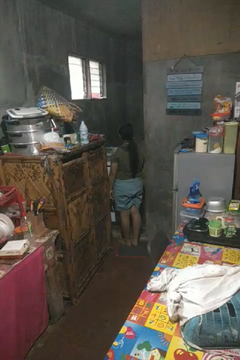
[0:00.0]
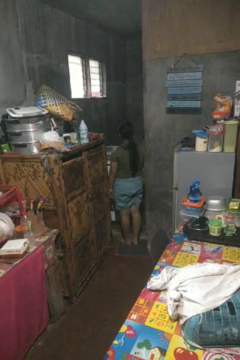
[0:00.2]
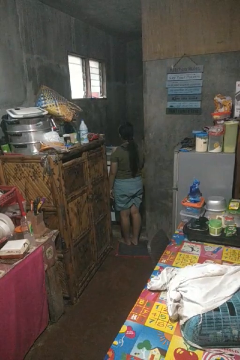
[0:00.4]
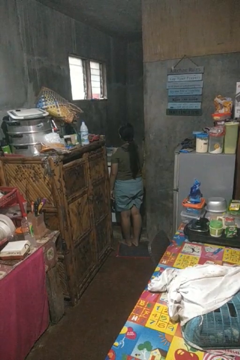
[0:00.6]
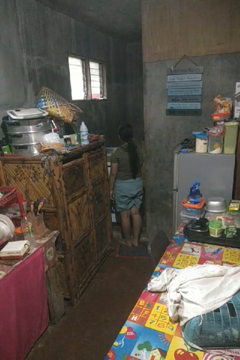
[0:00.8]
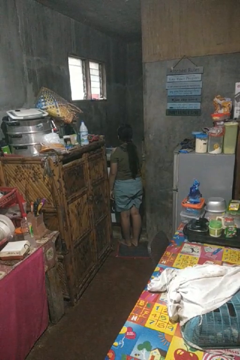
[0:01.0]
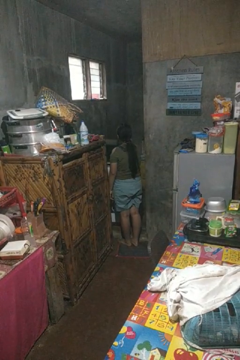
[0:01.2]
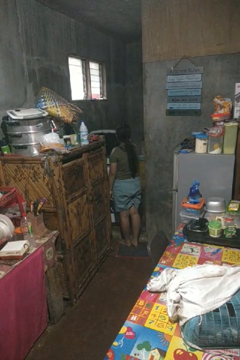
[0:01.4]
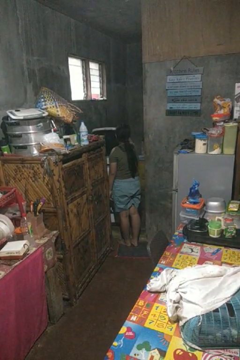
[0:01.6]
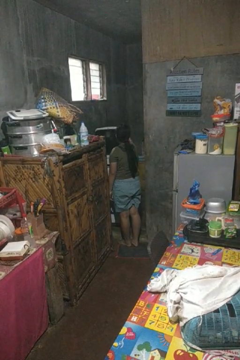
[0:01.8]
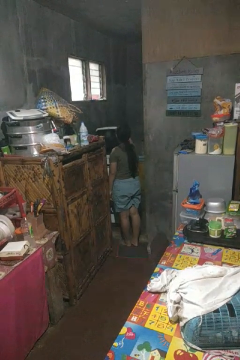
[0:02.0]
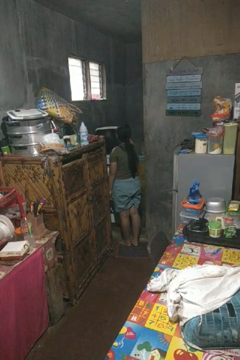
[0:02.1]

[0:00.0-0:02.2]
person opens clothes washer

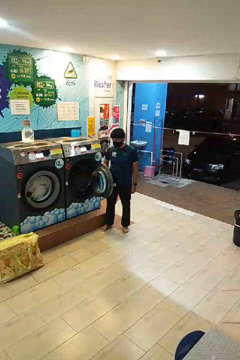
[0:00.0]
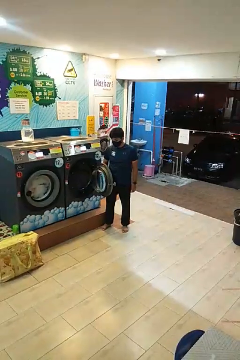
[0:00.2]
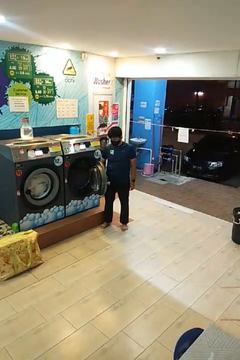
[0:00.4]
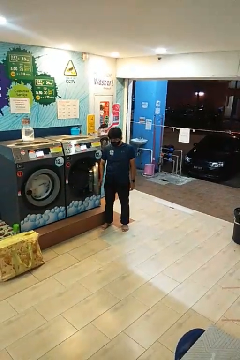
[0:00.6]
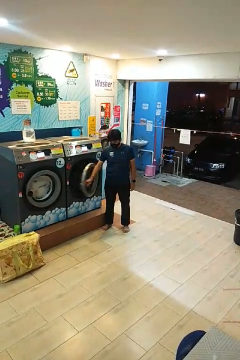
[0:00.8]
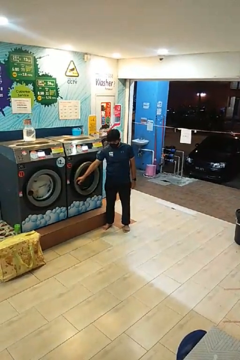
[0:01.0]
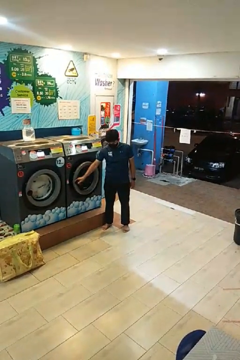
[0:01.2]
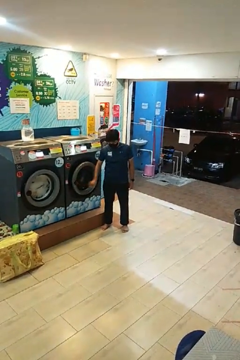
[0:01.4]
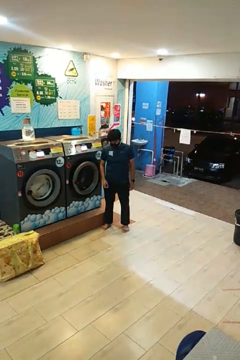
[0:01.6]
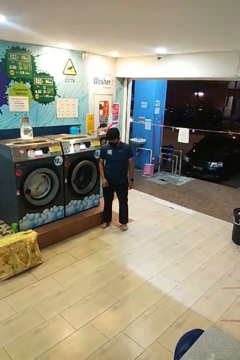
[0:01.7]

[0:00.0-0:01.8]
person closes clothes washer

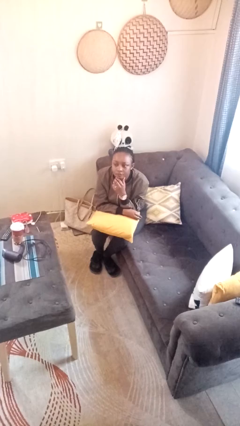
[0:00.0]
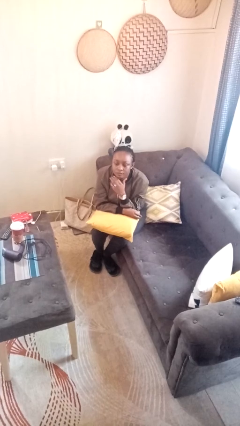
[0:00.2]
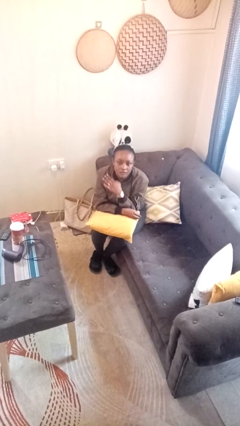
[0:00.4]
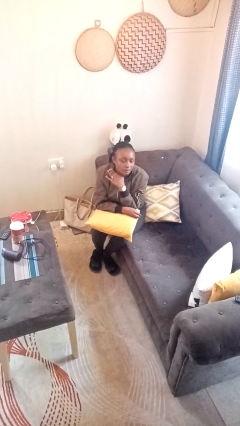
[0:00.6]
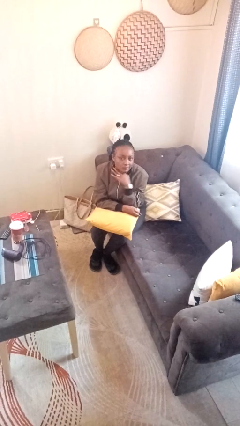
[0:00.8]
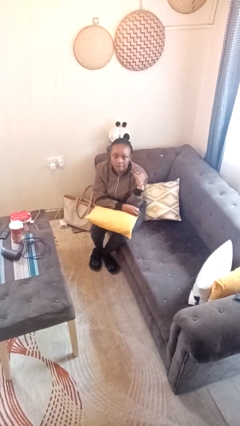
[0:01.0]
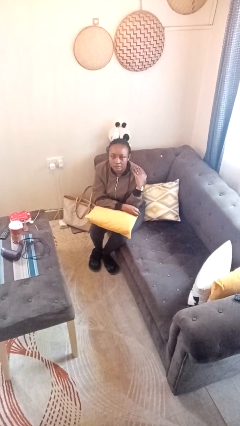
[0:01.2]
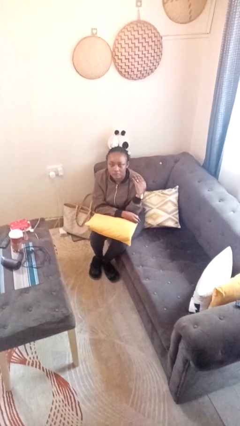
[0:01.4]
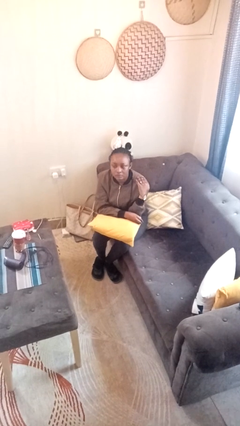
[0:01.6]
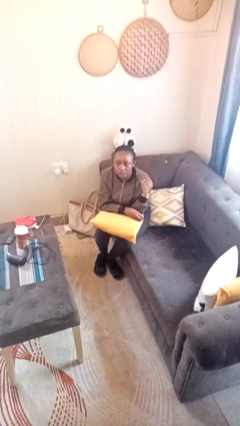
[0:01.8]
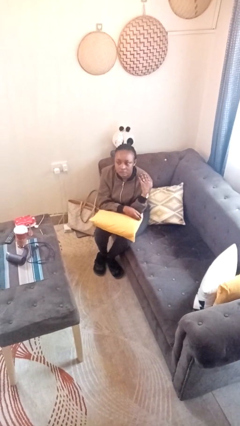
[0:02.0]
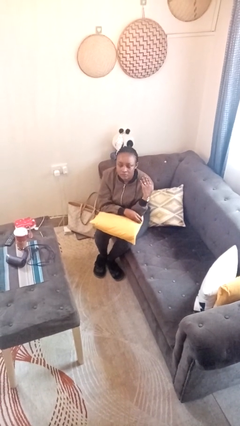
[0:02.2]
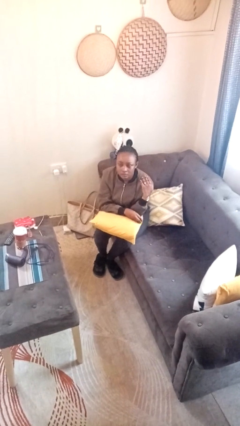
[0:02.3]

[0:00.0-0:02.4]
person gestures cut

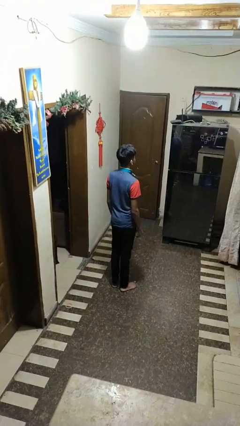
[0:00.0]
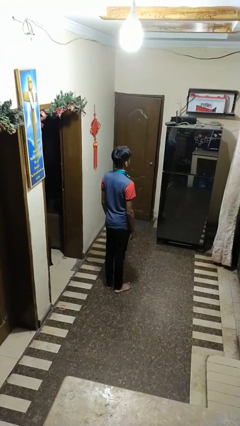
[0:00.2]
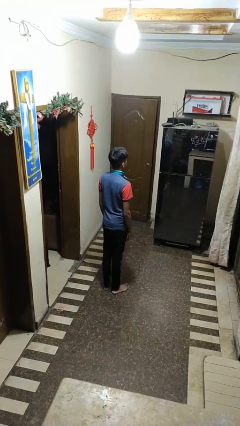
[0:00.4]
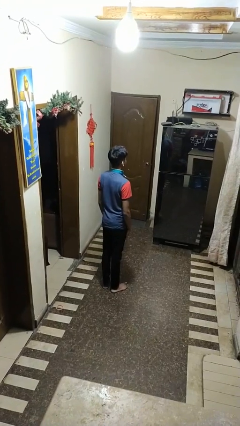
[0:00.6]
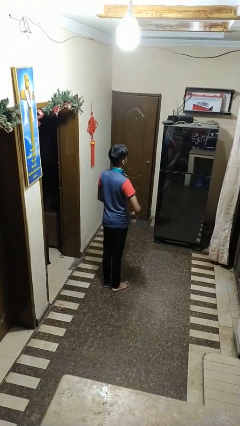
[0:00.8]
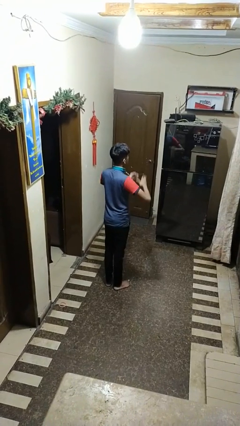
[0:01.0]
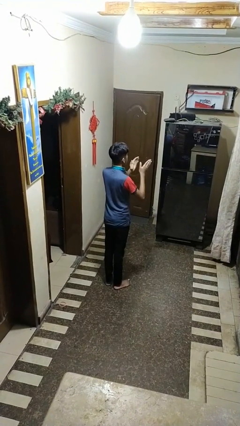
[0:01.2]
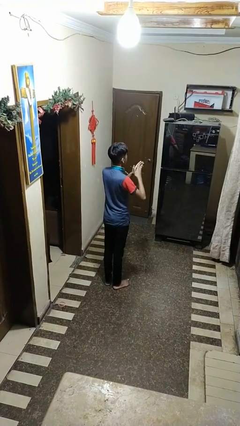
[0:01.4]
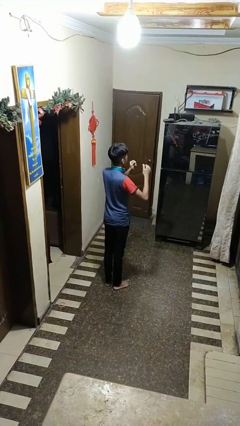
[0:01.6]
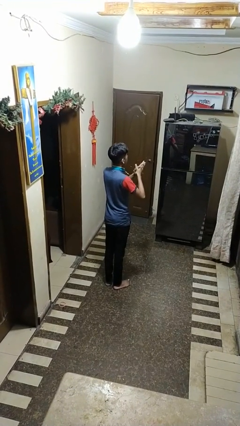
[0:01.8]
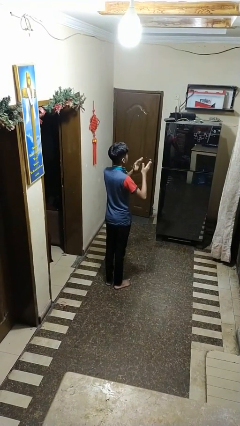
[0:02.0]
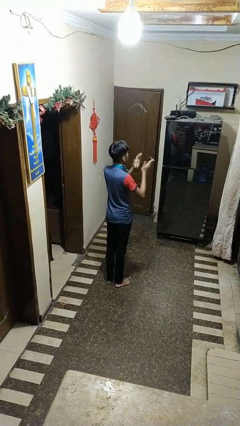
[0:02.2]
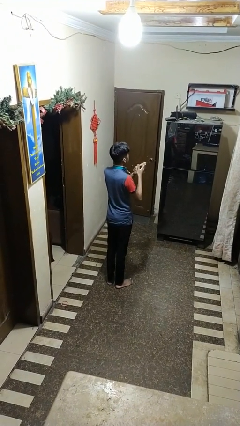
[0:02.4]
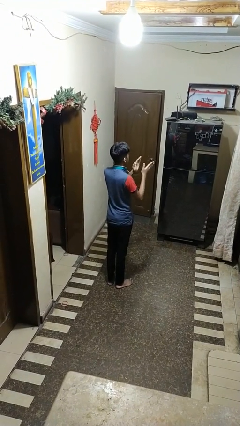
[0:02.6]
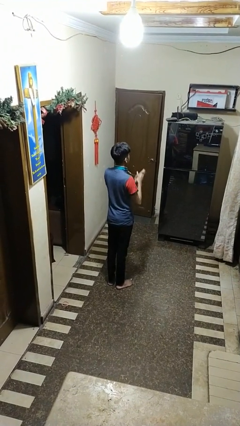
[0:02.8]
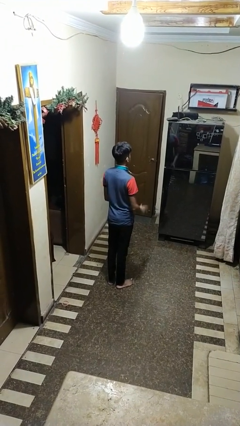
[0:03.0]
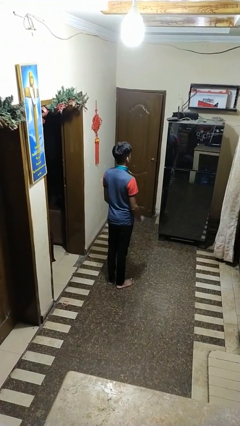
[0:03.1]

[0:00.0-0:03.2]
person claps hands

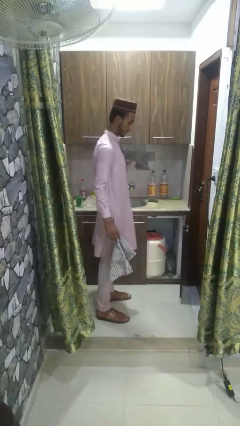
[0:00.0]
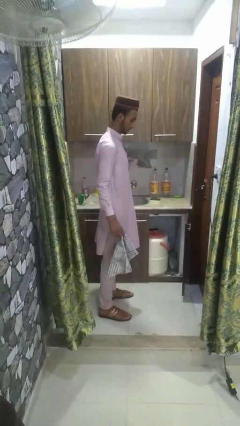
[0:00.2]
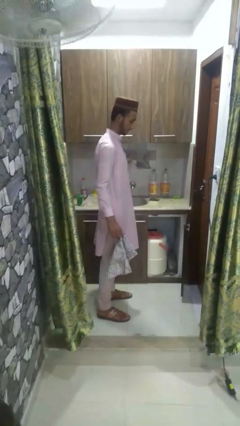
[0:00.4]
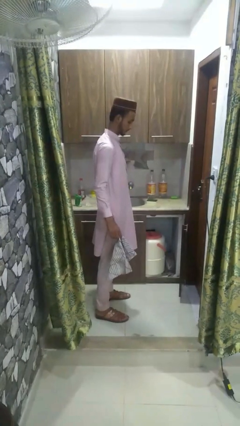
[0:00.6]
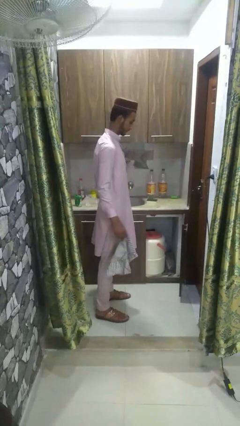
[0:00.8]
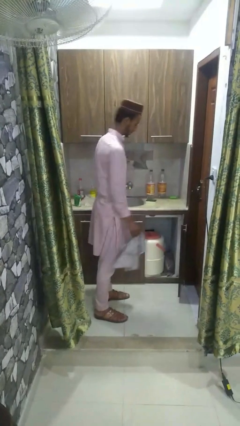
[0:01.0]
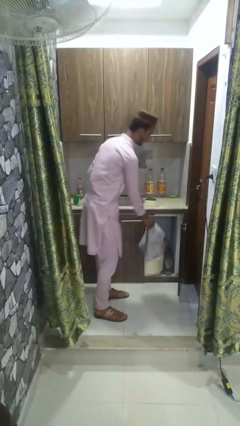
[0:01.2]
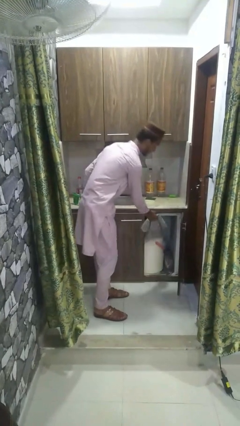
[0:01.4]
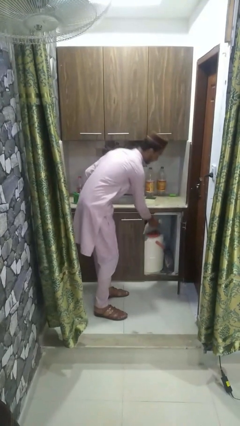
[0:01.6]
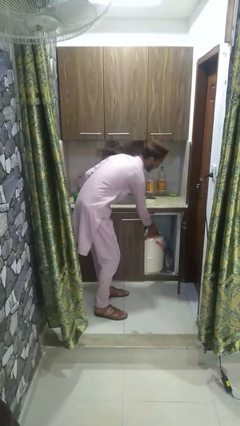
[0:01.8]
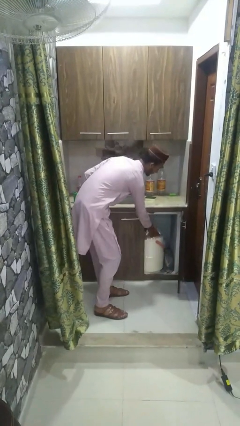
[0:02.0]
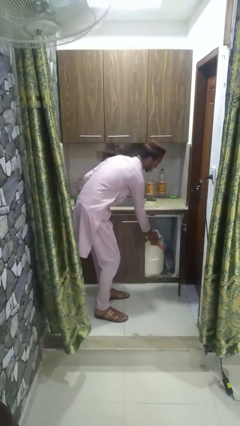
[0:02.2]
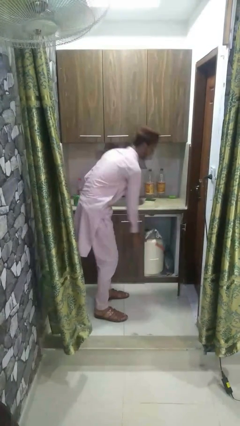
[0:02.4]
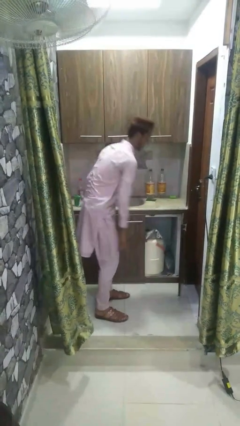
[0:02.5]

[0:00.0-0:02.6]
person loads clotheswasher

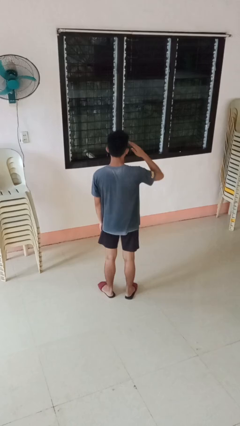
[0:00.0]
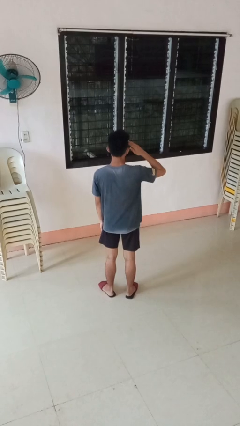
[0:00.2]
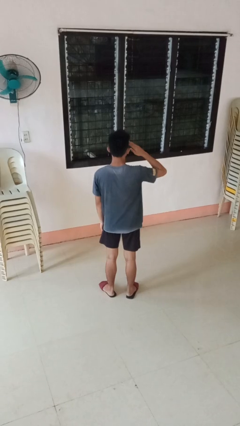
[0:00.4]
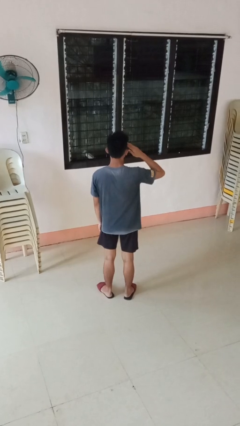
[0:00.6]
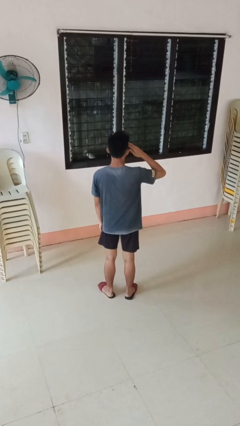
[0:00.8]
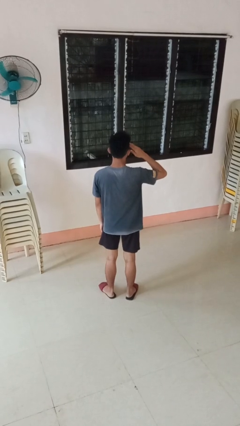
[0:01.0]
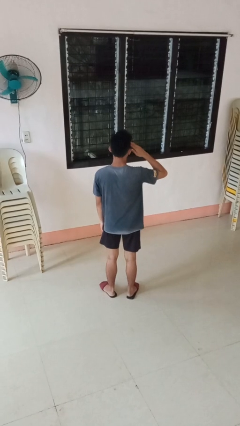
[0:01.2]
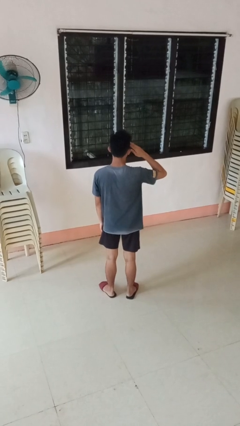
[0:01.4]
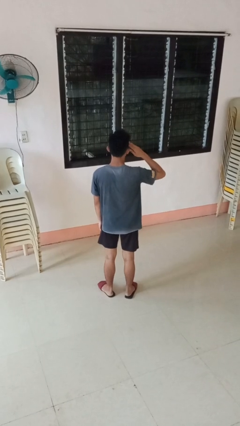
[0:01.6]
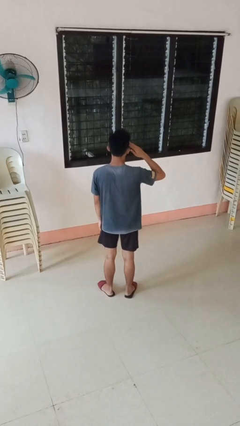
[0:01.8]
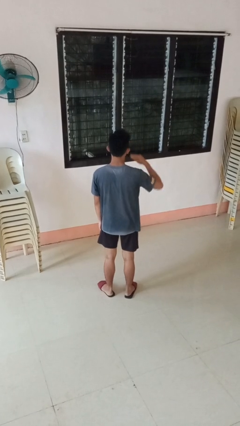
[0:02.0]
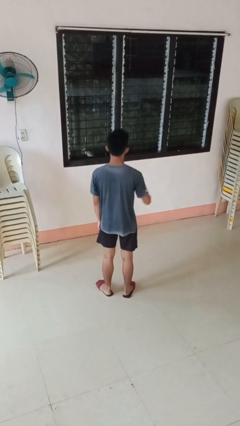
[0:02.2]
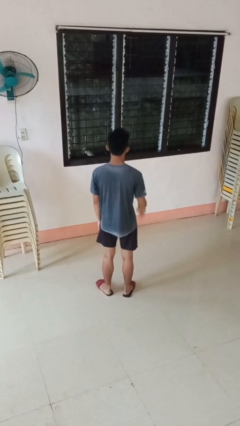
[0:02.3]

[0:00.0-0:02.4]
person salutes

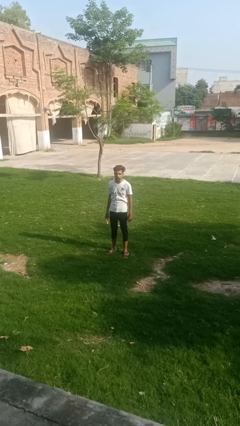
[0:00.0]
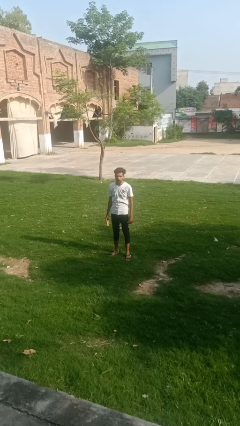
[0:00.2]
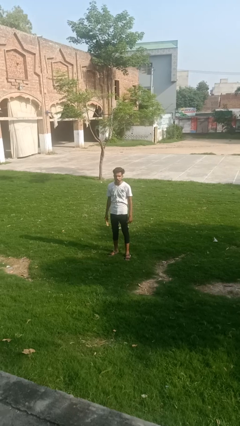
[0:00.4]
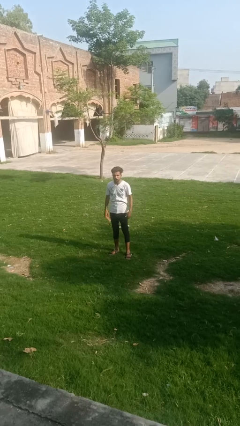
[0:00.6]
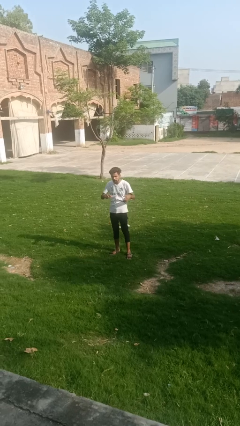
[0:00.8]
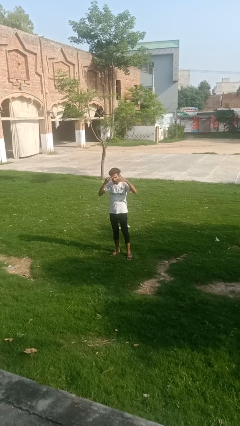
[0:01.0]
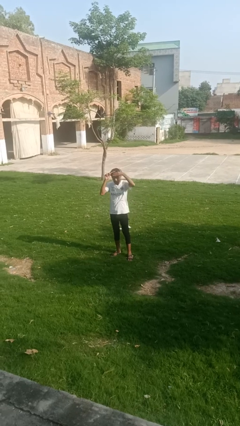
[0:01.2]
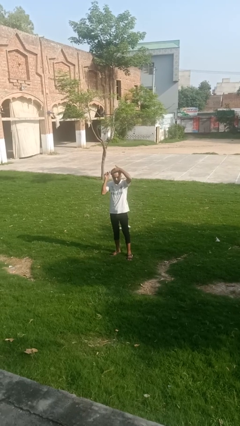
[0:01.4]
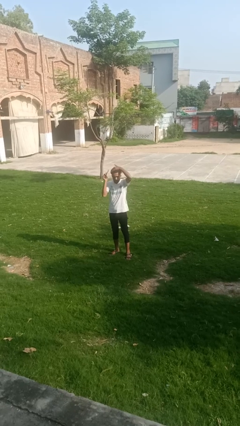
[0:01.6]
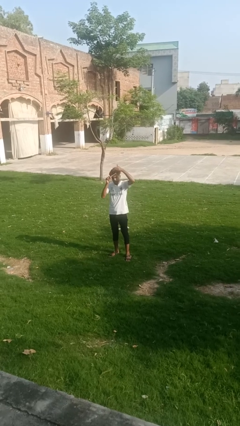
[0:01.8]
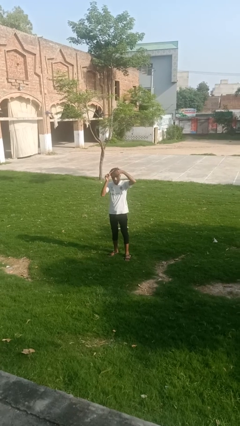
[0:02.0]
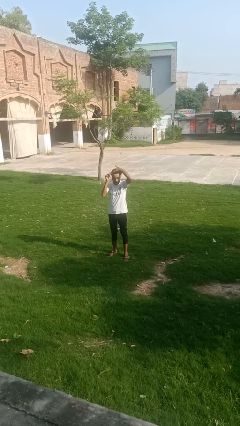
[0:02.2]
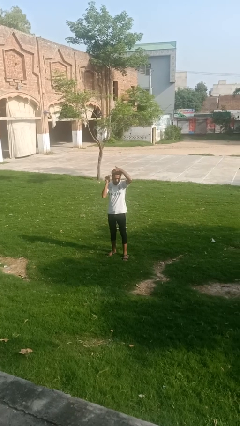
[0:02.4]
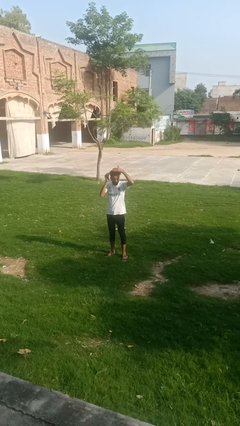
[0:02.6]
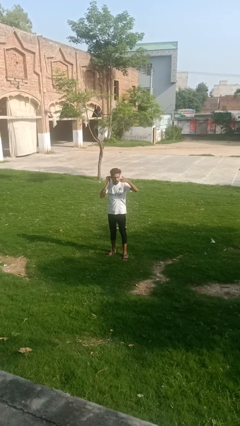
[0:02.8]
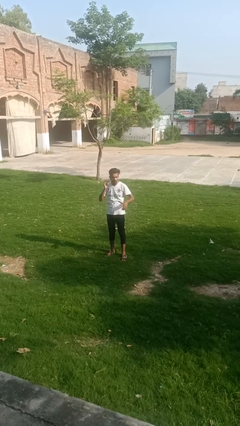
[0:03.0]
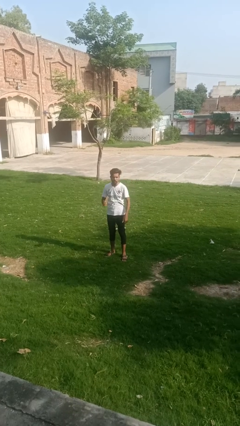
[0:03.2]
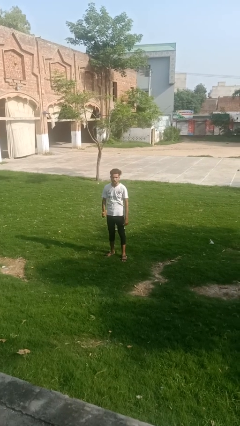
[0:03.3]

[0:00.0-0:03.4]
person brushes hair
